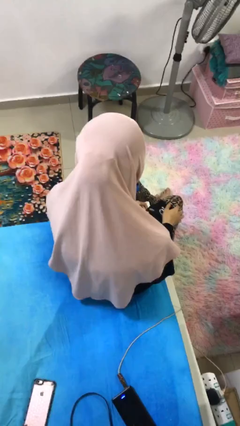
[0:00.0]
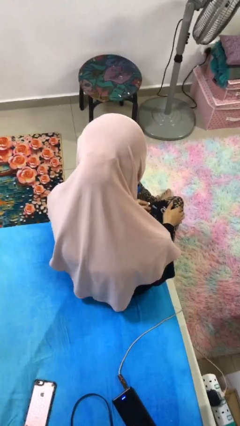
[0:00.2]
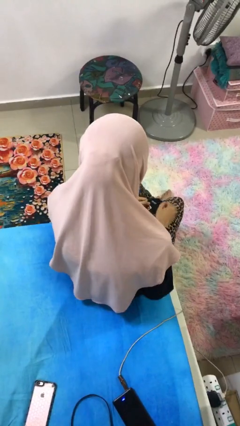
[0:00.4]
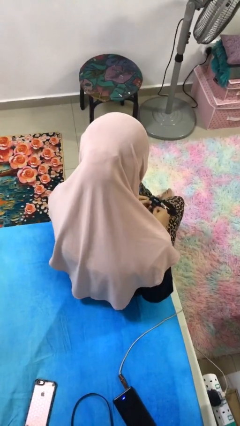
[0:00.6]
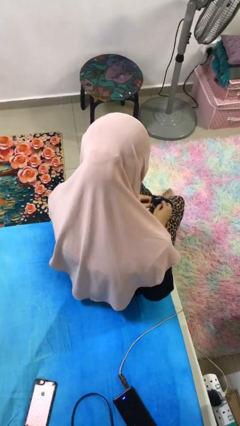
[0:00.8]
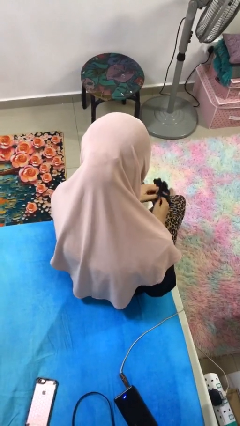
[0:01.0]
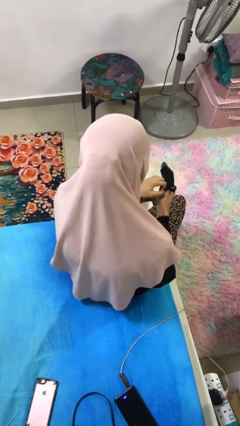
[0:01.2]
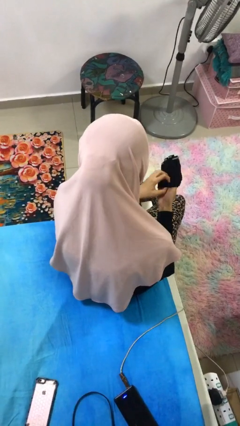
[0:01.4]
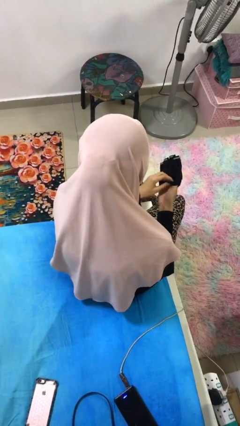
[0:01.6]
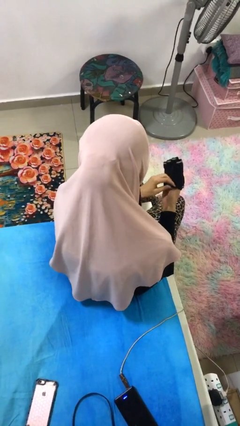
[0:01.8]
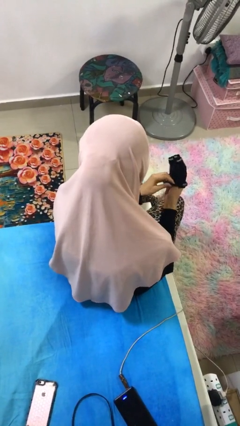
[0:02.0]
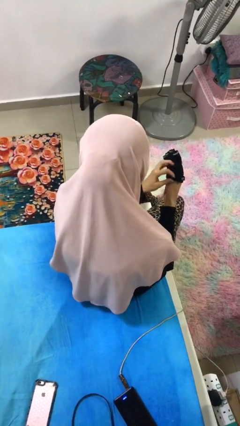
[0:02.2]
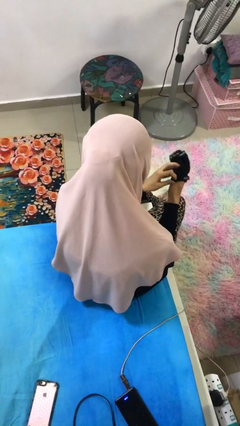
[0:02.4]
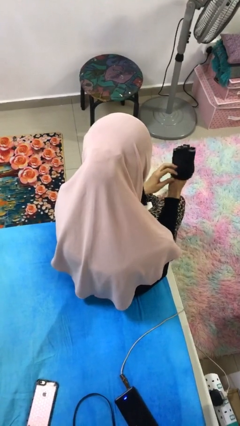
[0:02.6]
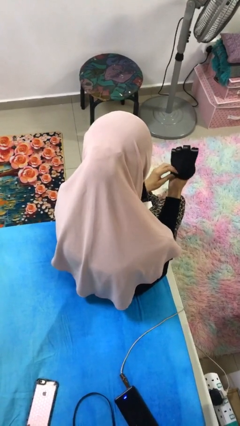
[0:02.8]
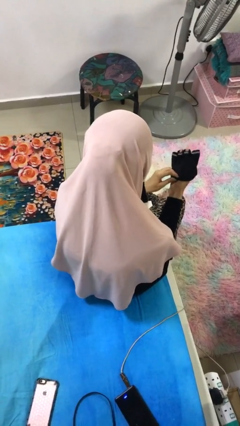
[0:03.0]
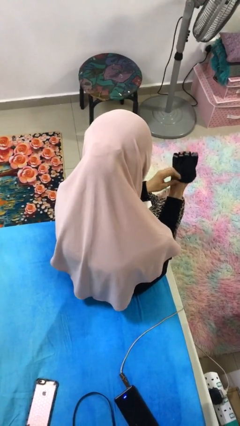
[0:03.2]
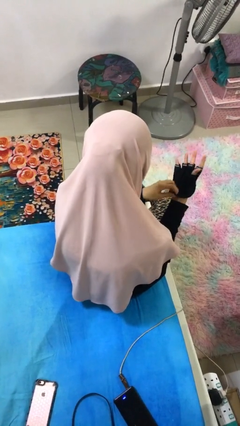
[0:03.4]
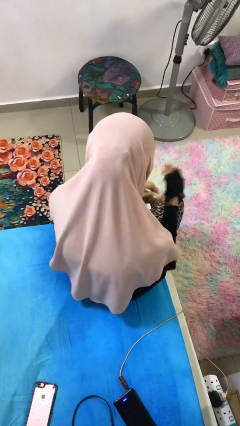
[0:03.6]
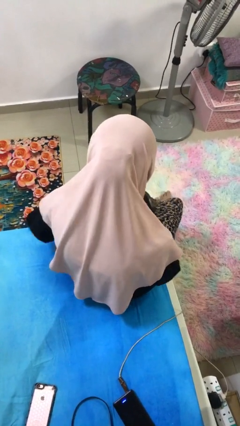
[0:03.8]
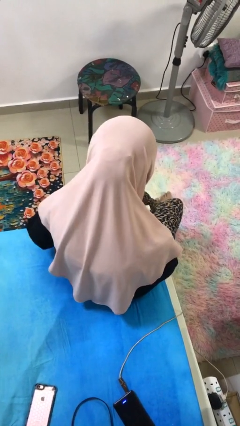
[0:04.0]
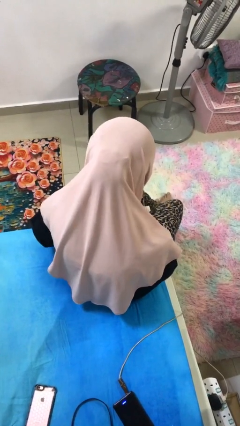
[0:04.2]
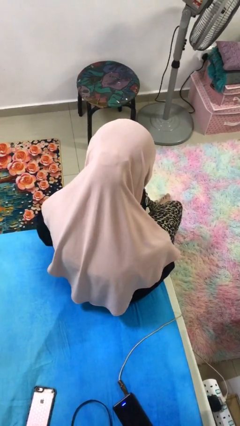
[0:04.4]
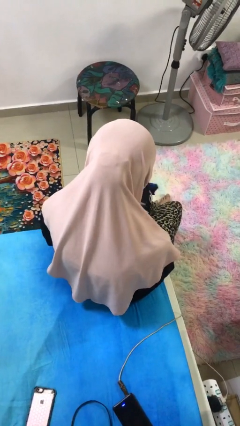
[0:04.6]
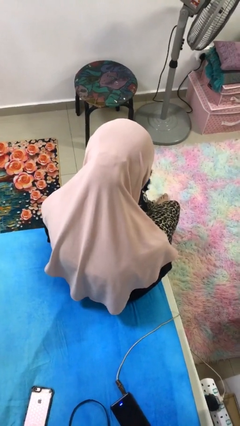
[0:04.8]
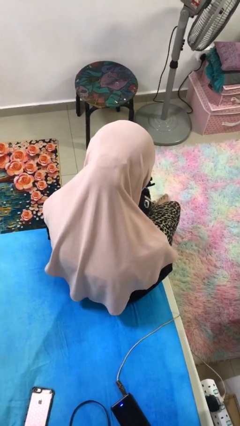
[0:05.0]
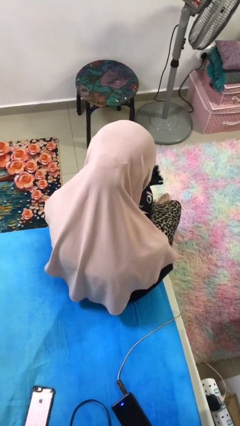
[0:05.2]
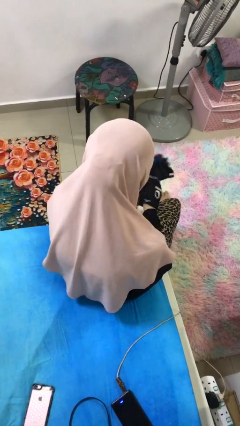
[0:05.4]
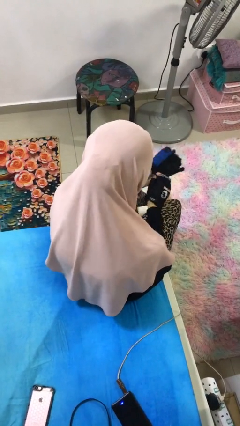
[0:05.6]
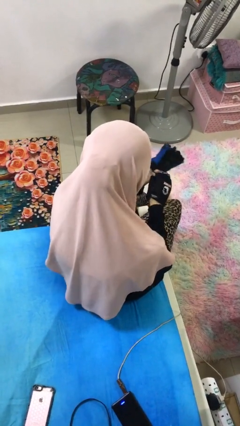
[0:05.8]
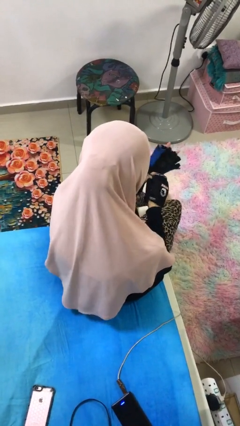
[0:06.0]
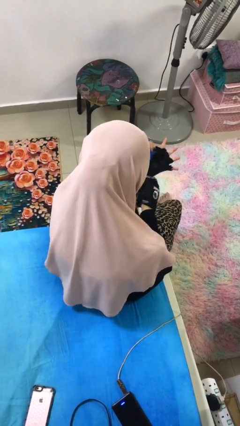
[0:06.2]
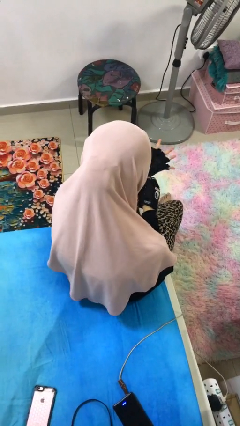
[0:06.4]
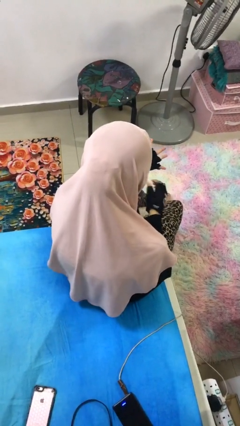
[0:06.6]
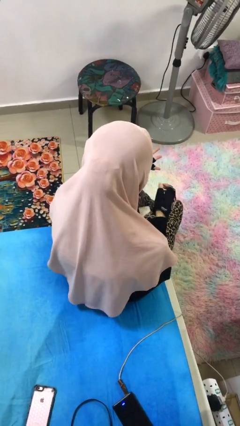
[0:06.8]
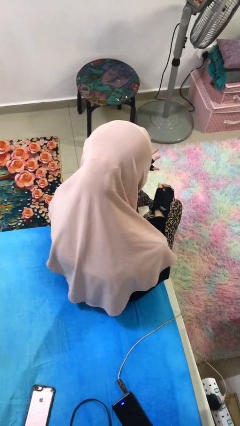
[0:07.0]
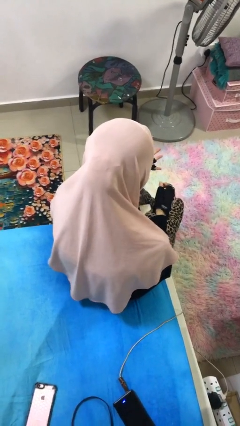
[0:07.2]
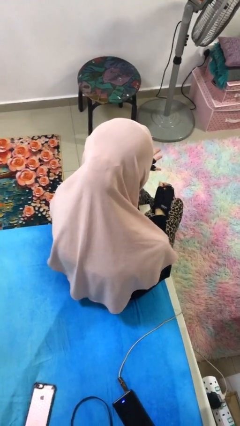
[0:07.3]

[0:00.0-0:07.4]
person puts on gloves

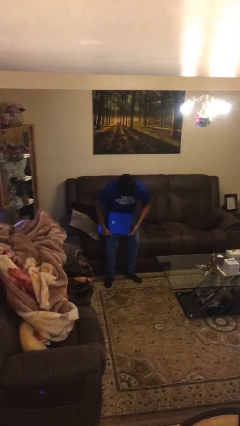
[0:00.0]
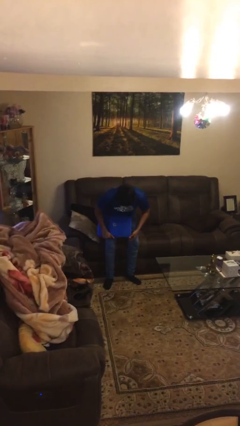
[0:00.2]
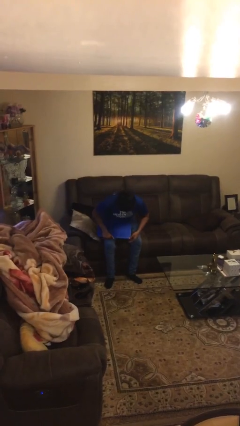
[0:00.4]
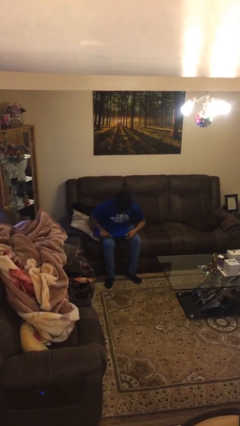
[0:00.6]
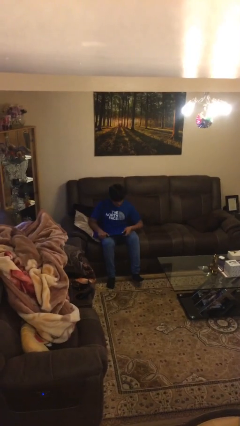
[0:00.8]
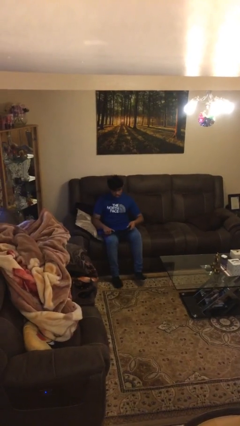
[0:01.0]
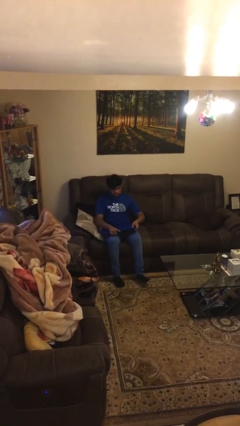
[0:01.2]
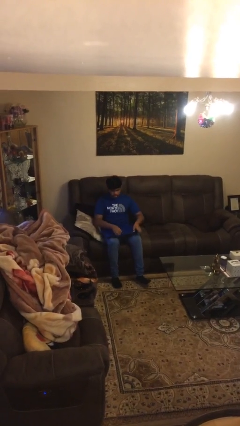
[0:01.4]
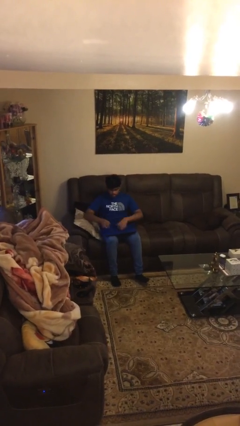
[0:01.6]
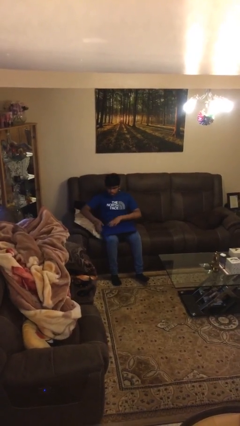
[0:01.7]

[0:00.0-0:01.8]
person sits down

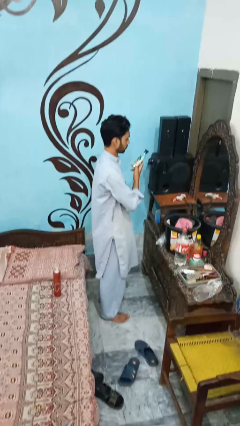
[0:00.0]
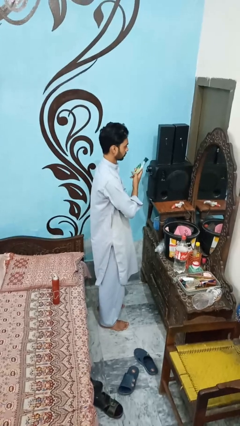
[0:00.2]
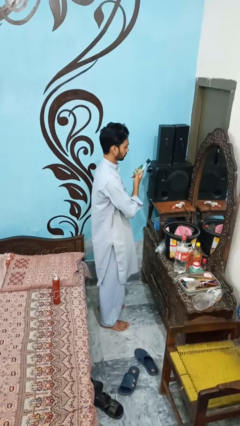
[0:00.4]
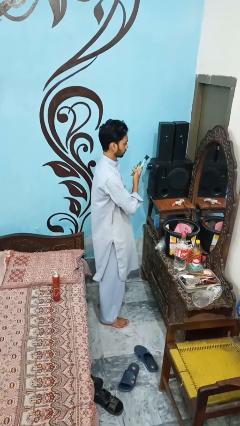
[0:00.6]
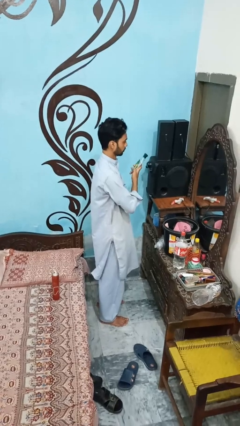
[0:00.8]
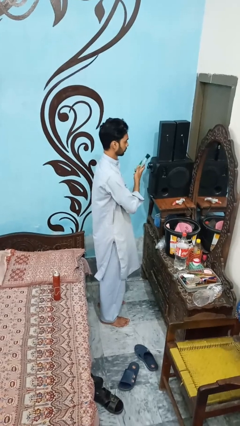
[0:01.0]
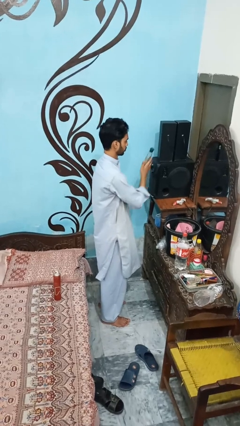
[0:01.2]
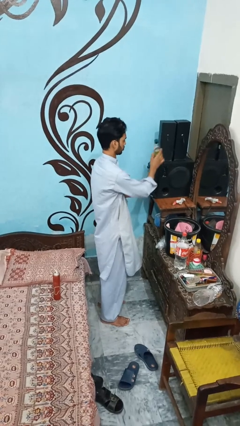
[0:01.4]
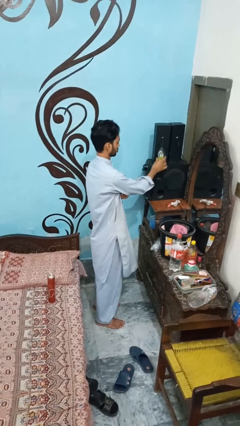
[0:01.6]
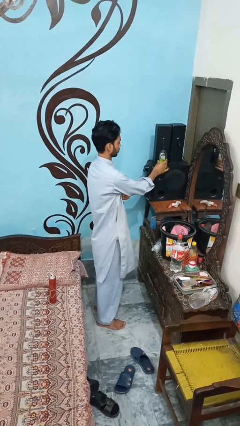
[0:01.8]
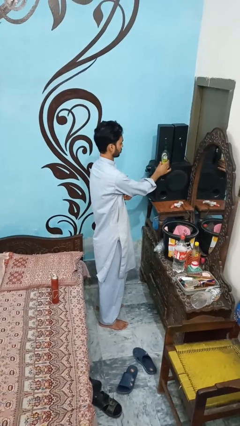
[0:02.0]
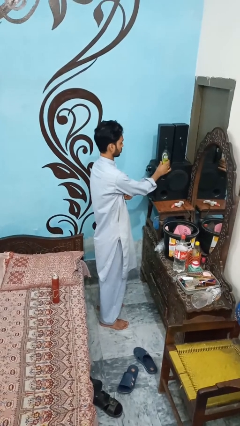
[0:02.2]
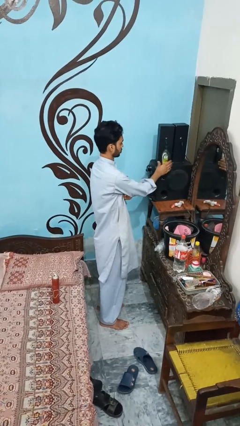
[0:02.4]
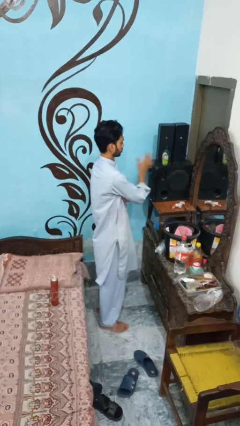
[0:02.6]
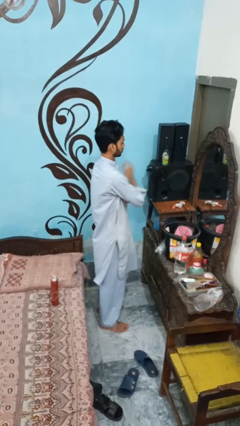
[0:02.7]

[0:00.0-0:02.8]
person picks up object from shelf

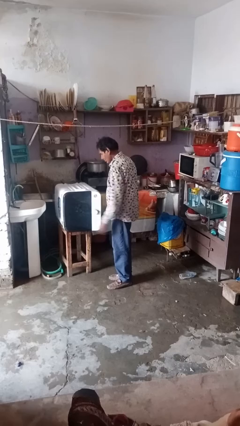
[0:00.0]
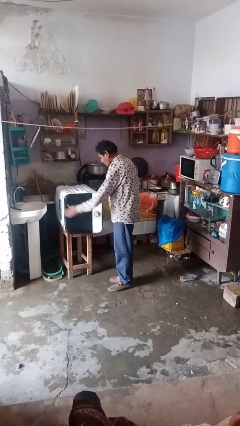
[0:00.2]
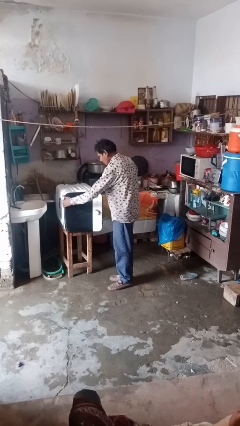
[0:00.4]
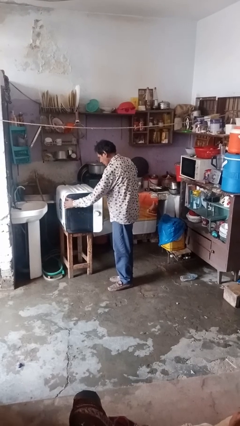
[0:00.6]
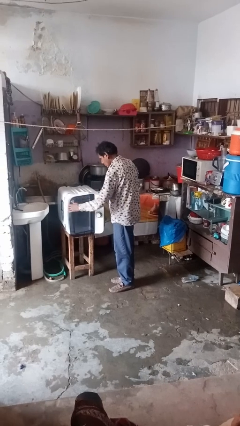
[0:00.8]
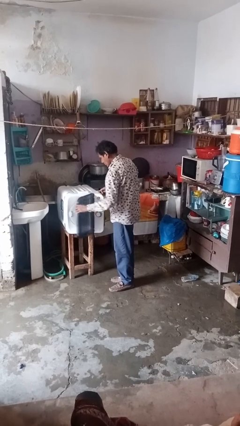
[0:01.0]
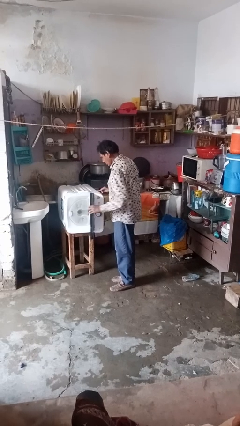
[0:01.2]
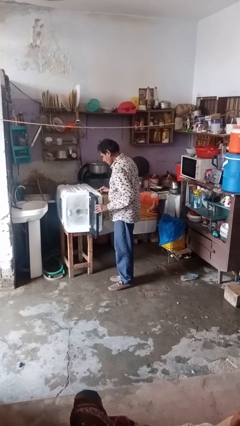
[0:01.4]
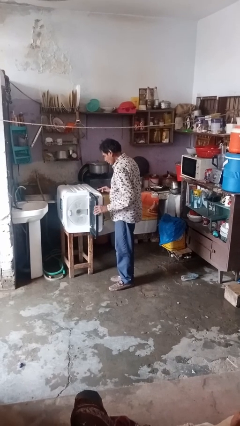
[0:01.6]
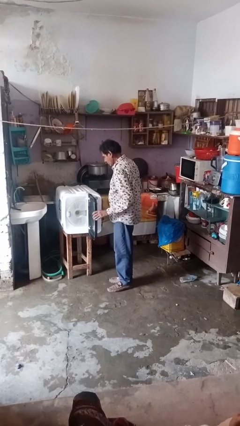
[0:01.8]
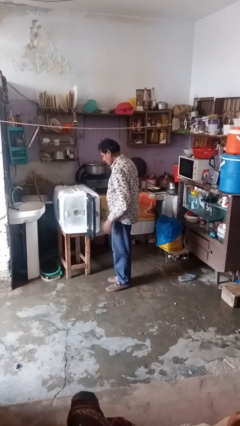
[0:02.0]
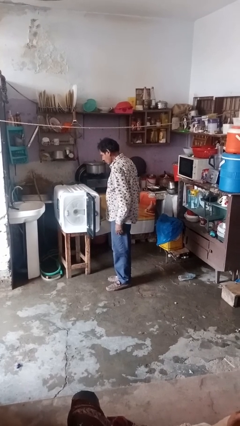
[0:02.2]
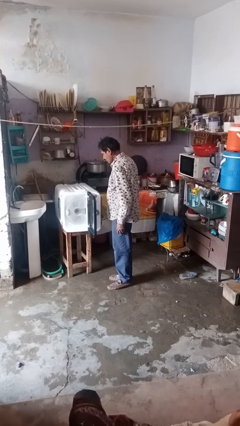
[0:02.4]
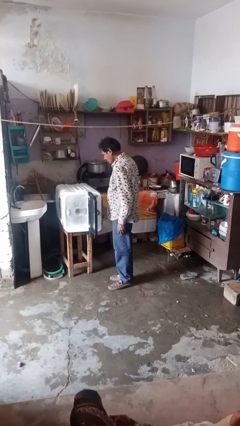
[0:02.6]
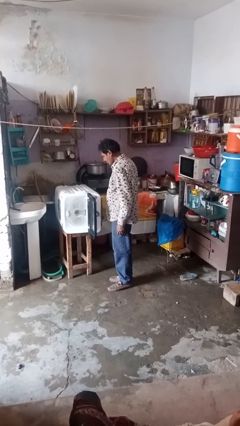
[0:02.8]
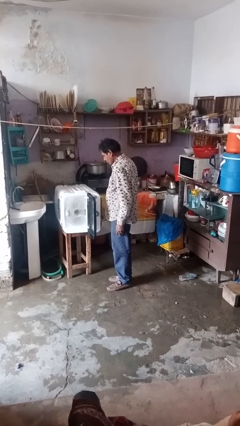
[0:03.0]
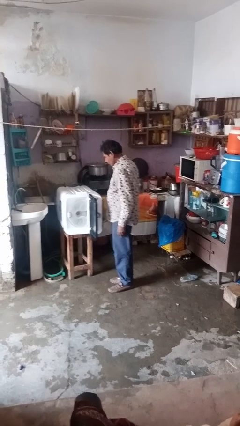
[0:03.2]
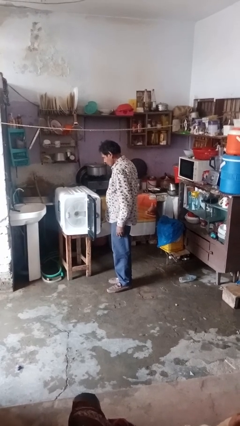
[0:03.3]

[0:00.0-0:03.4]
person opens dishwasher

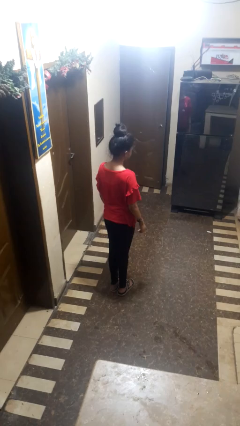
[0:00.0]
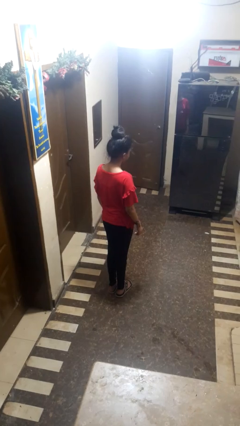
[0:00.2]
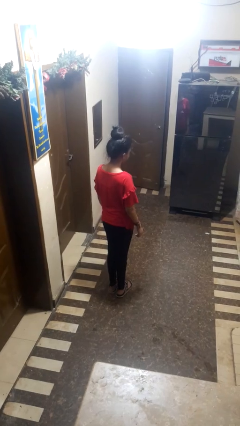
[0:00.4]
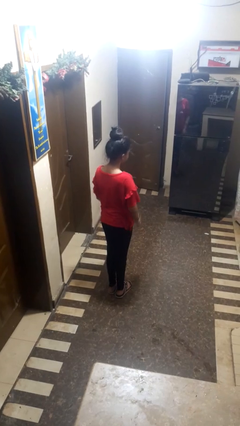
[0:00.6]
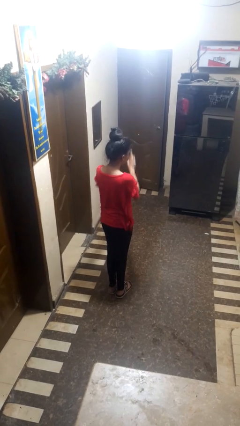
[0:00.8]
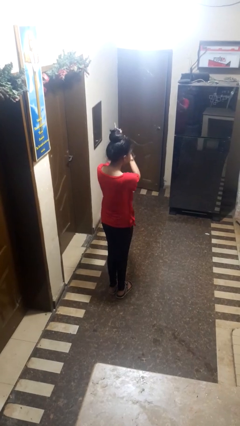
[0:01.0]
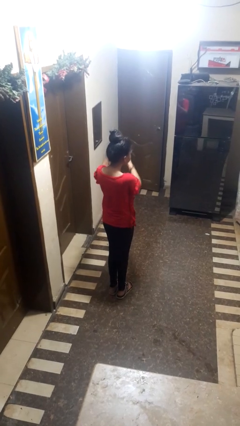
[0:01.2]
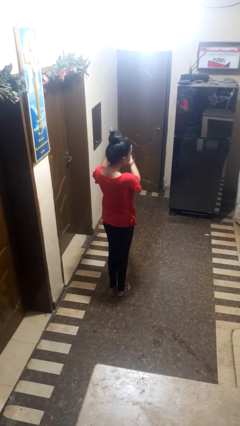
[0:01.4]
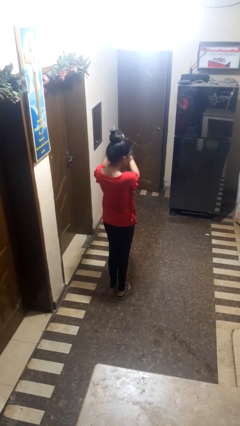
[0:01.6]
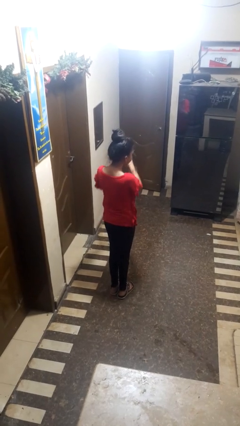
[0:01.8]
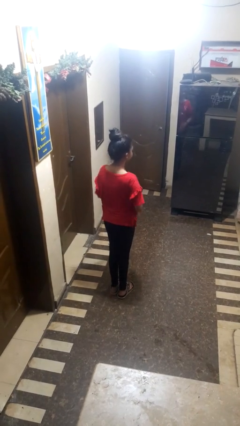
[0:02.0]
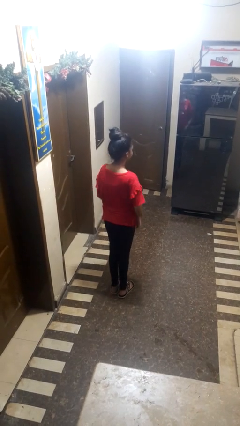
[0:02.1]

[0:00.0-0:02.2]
person dances in place

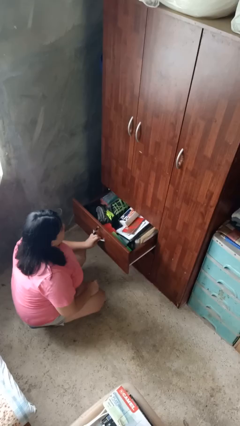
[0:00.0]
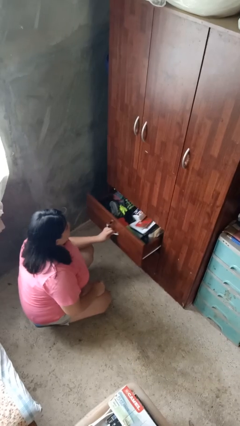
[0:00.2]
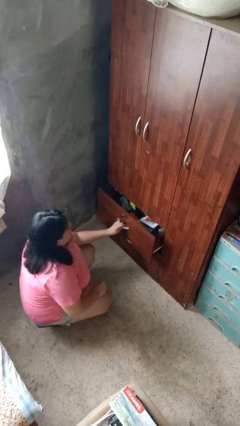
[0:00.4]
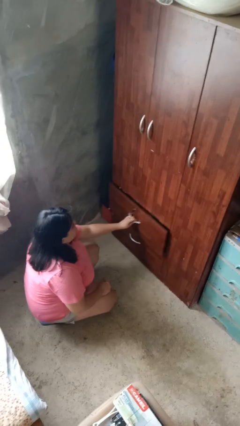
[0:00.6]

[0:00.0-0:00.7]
person closes dresser drawer
